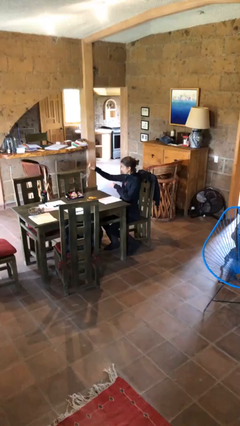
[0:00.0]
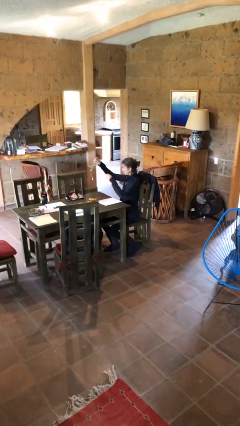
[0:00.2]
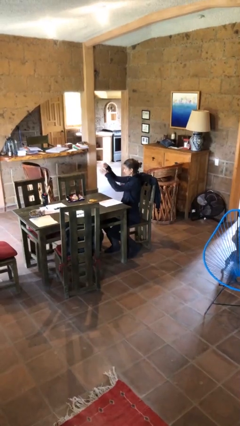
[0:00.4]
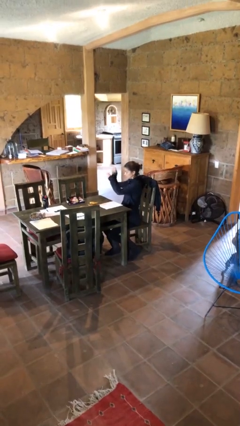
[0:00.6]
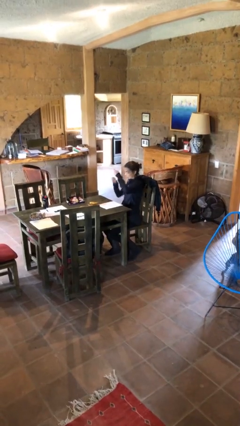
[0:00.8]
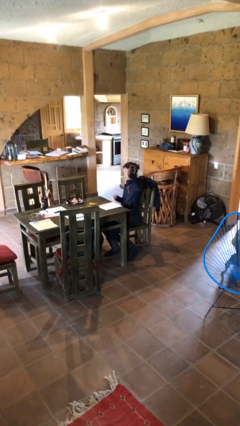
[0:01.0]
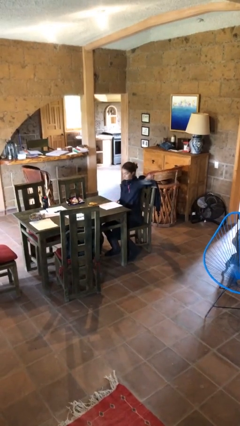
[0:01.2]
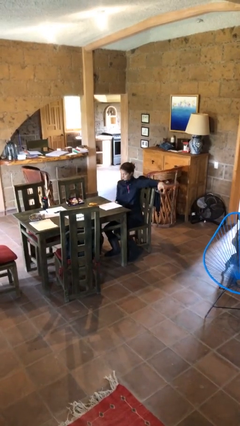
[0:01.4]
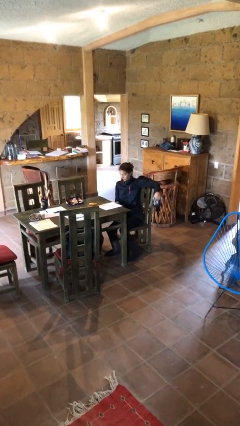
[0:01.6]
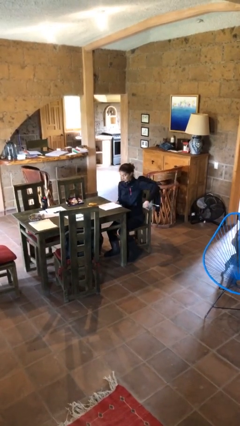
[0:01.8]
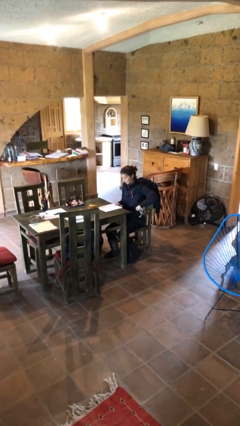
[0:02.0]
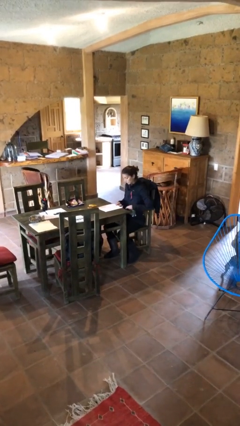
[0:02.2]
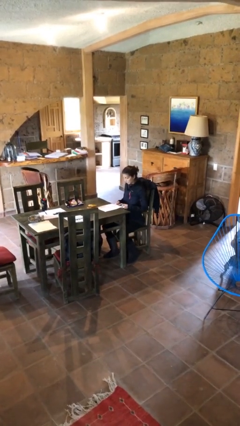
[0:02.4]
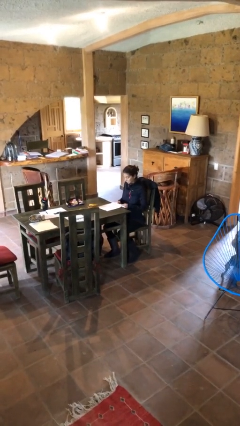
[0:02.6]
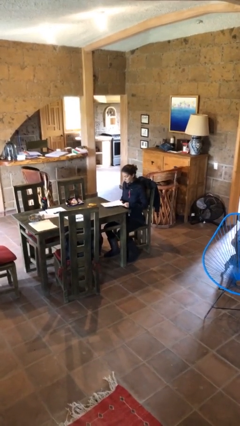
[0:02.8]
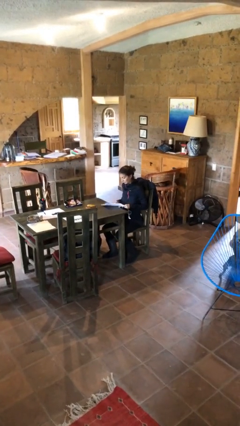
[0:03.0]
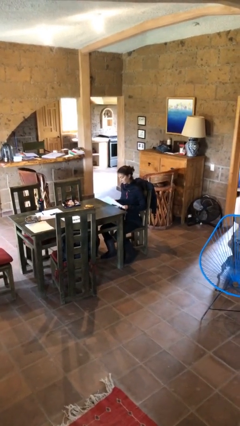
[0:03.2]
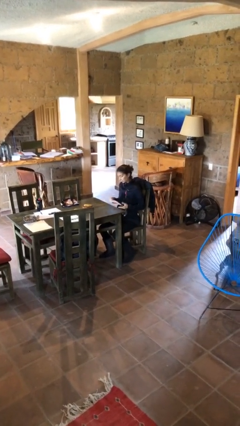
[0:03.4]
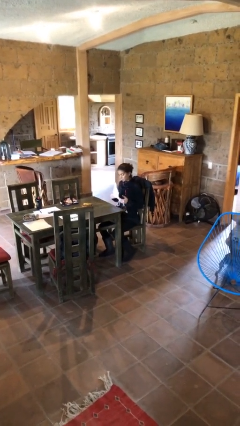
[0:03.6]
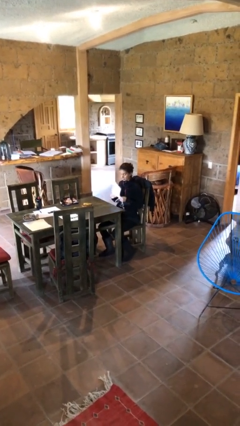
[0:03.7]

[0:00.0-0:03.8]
person picks up object from table

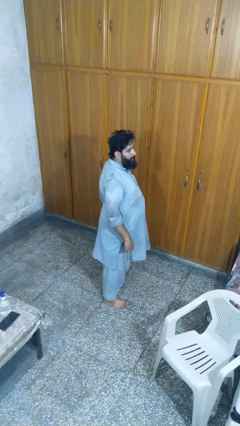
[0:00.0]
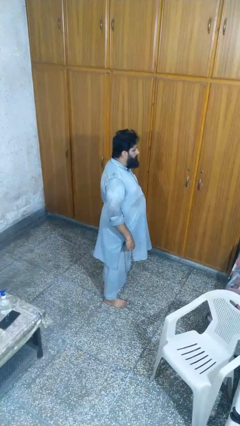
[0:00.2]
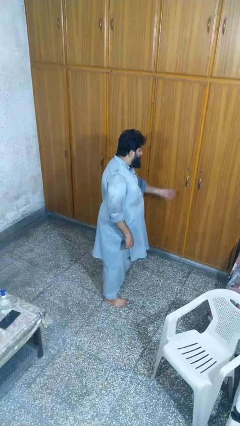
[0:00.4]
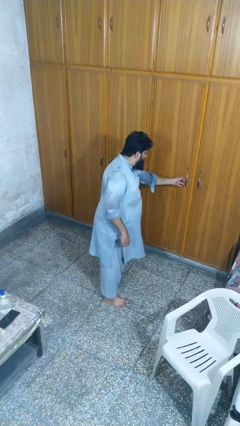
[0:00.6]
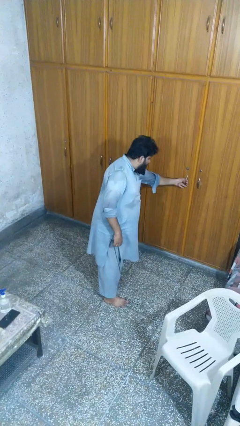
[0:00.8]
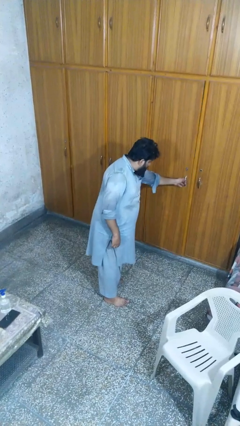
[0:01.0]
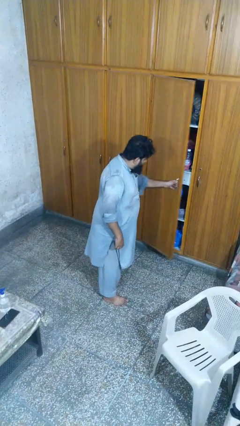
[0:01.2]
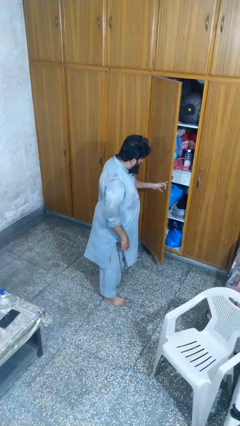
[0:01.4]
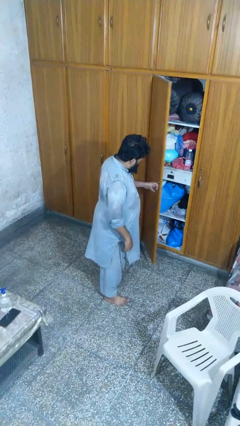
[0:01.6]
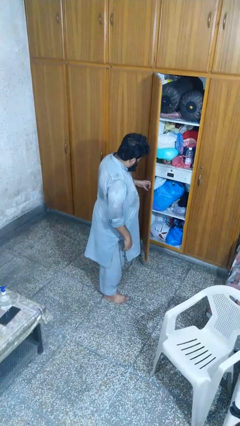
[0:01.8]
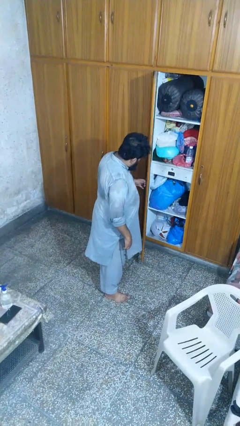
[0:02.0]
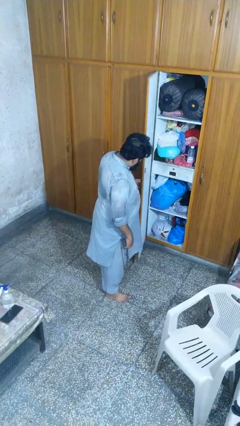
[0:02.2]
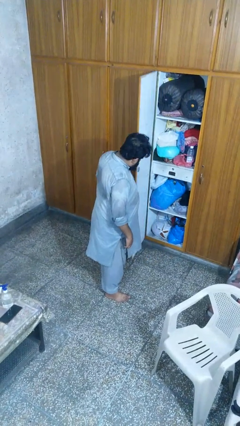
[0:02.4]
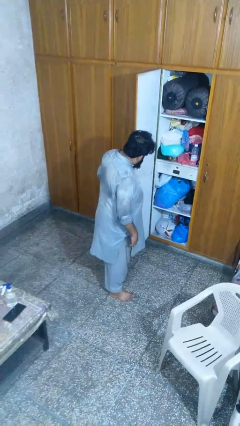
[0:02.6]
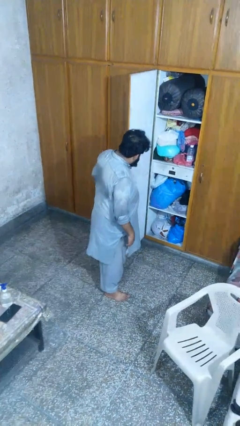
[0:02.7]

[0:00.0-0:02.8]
person opens closet door

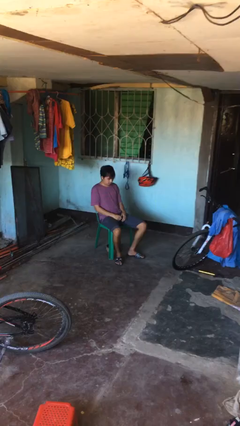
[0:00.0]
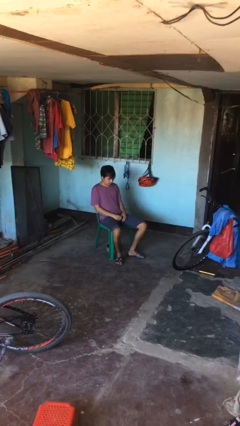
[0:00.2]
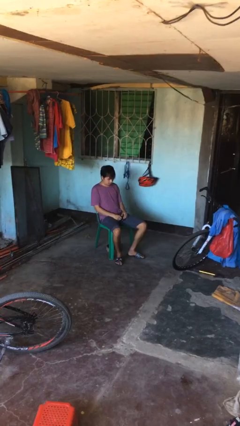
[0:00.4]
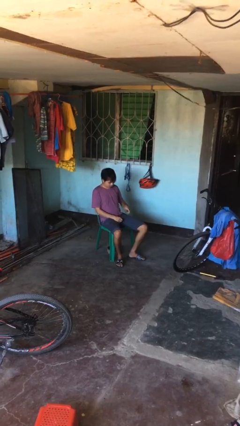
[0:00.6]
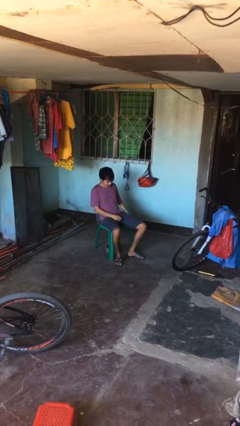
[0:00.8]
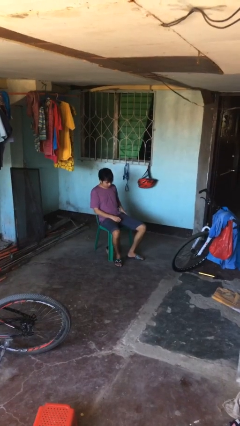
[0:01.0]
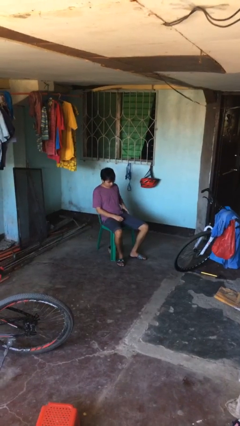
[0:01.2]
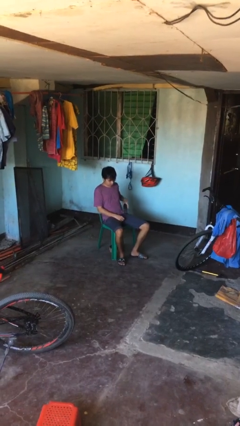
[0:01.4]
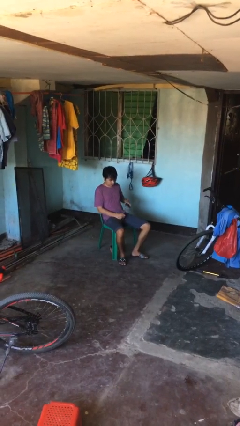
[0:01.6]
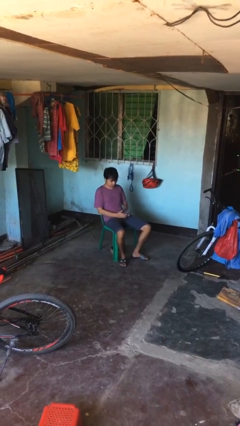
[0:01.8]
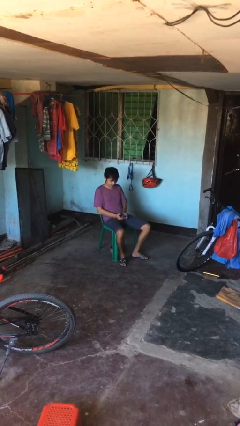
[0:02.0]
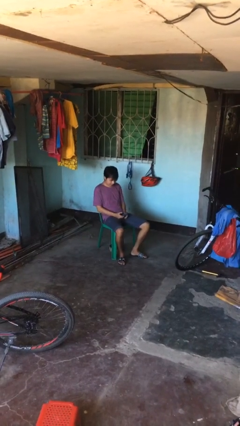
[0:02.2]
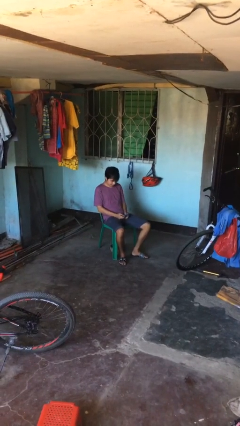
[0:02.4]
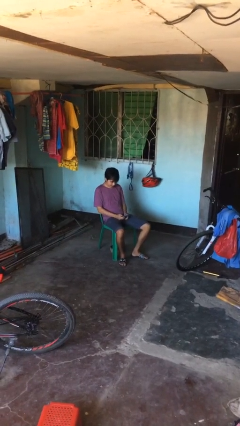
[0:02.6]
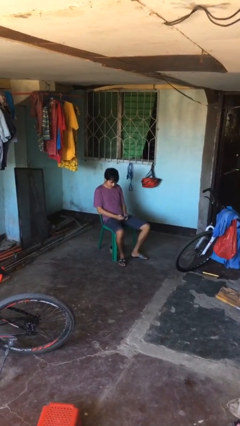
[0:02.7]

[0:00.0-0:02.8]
person takes phone from pocket

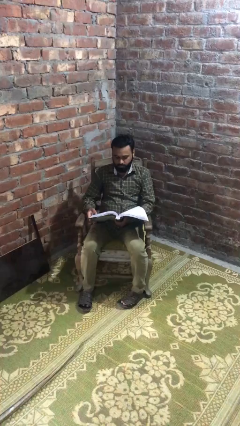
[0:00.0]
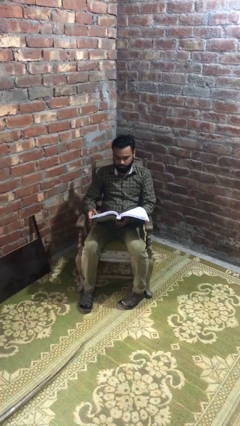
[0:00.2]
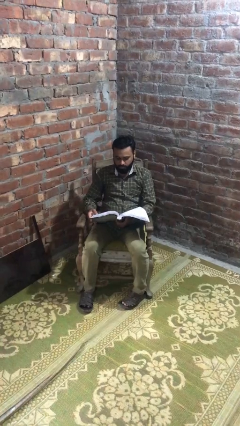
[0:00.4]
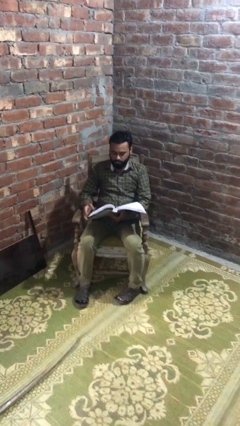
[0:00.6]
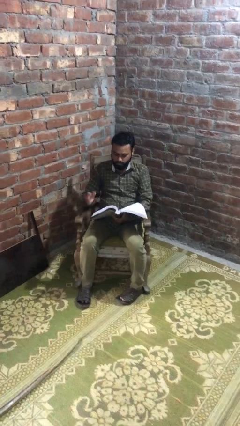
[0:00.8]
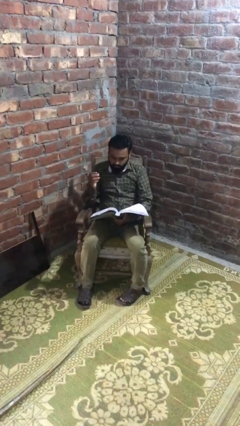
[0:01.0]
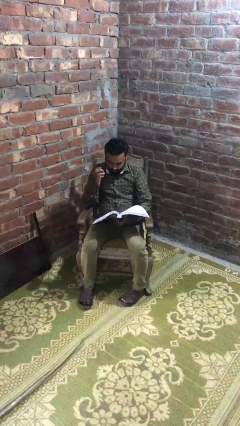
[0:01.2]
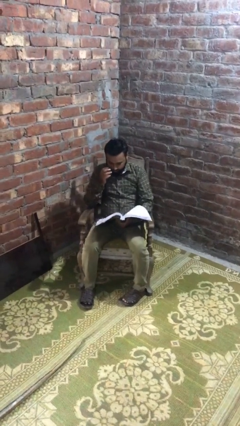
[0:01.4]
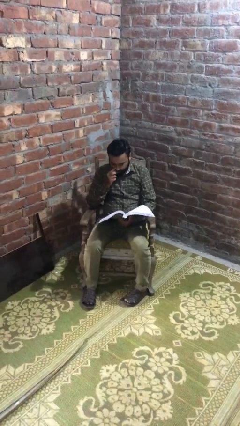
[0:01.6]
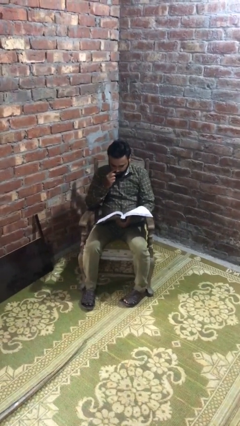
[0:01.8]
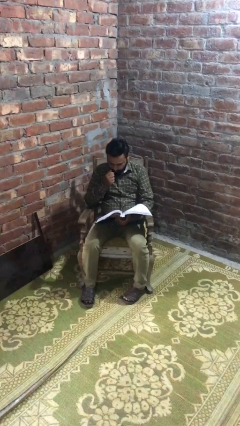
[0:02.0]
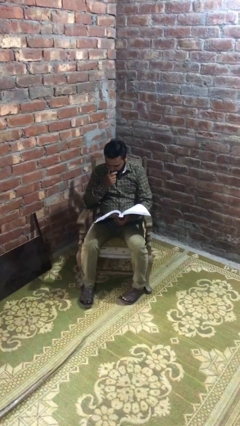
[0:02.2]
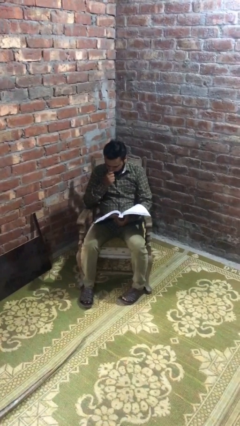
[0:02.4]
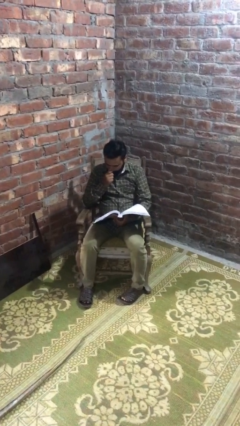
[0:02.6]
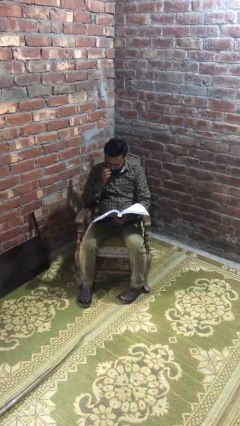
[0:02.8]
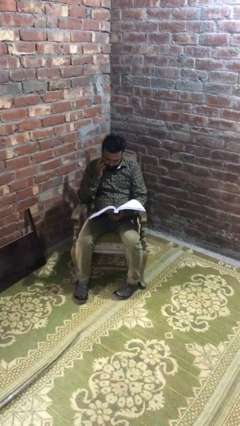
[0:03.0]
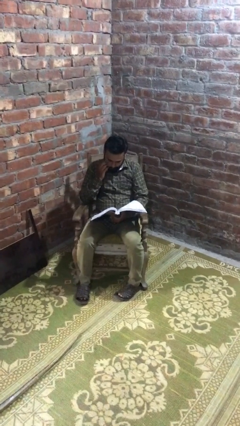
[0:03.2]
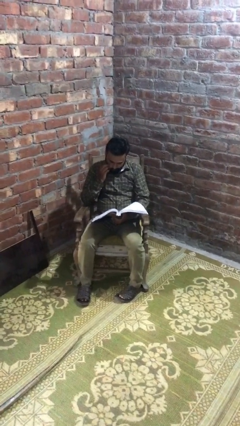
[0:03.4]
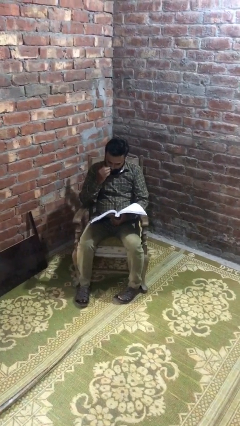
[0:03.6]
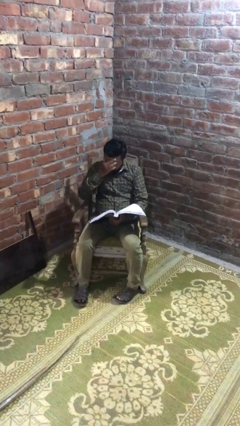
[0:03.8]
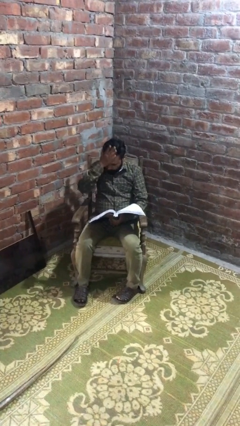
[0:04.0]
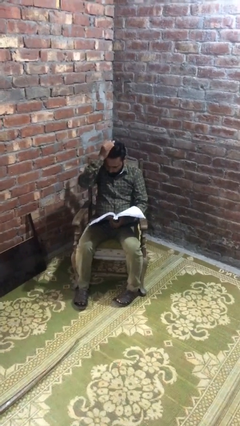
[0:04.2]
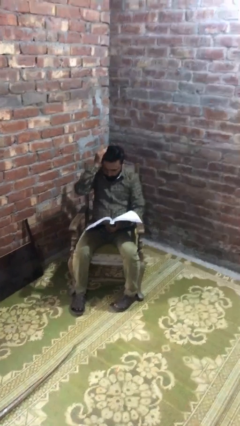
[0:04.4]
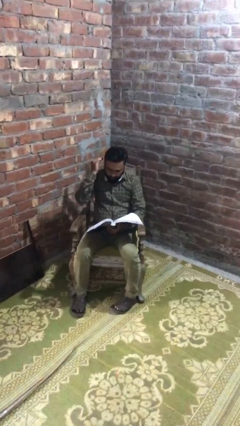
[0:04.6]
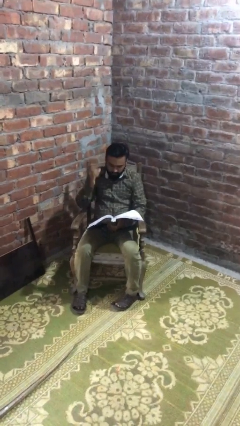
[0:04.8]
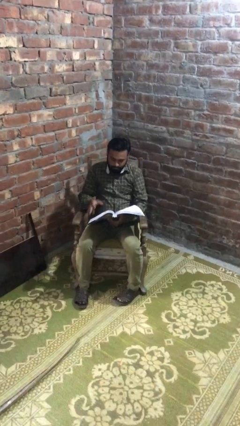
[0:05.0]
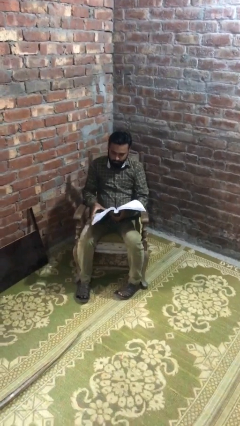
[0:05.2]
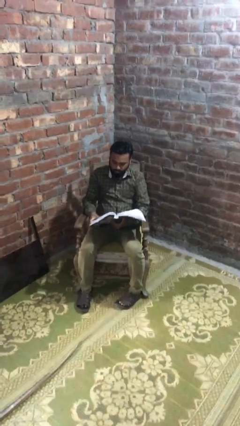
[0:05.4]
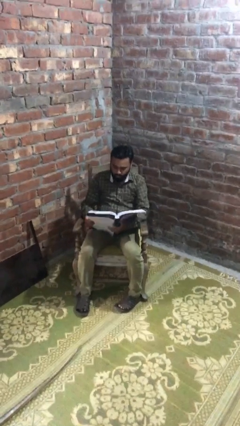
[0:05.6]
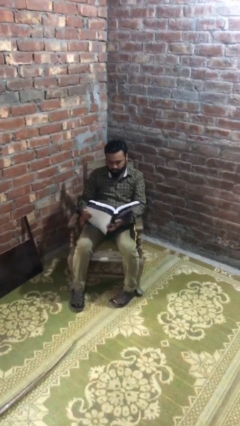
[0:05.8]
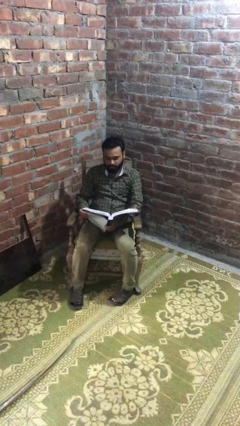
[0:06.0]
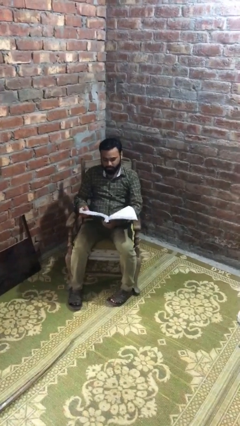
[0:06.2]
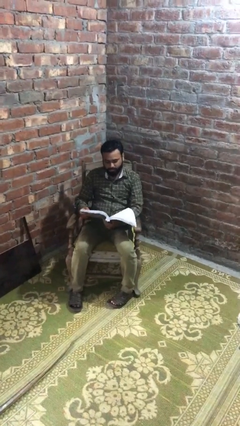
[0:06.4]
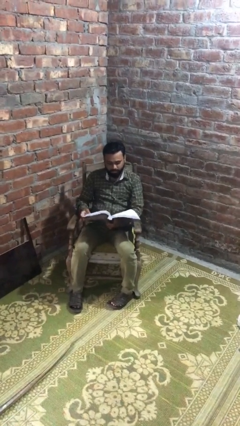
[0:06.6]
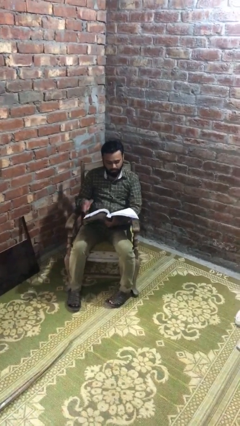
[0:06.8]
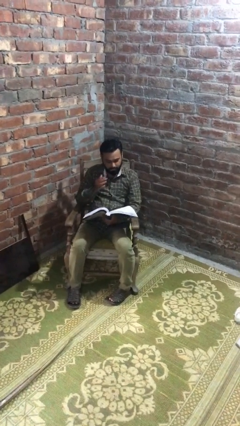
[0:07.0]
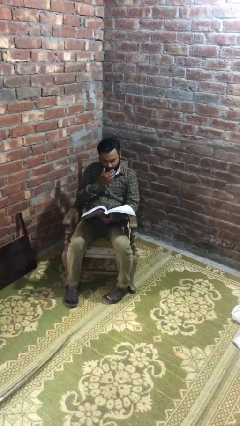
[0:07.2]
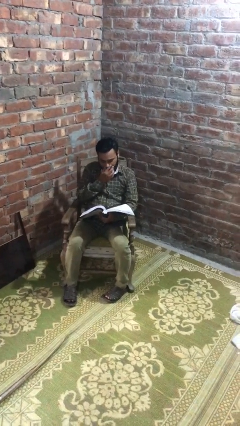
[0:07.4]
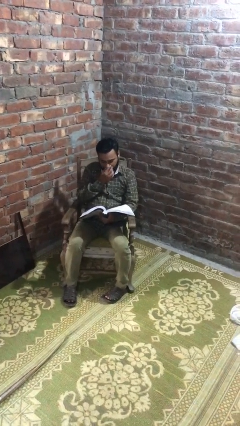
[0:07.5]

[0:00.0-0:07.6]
person reads document

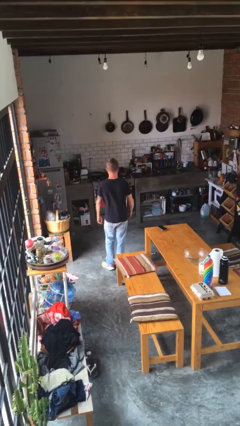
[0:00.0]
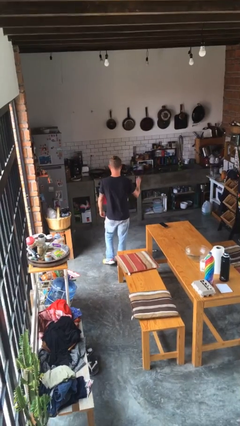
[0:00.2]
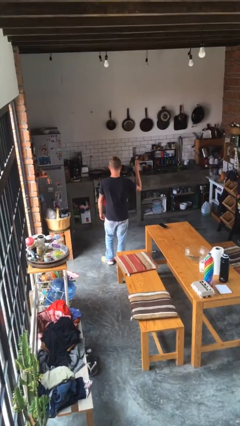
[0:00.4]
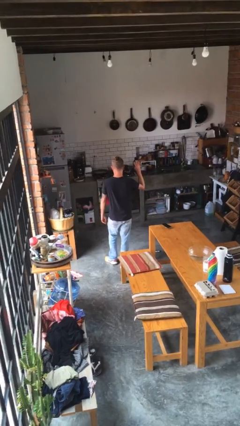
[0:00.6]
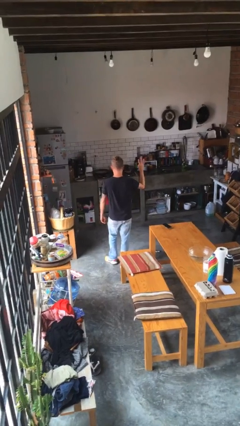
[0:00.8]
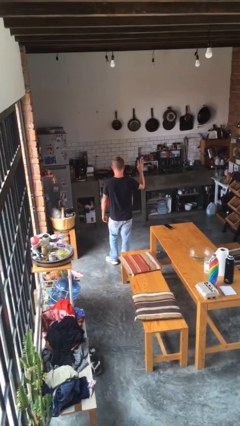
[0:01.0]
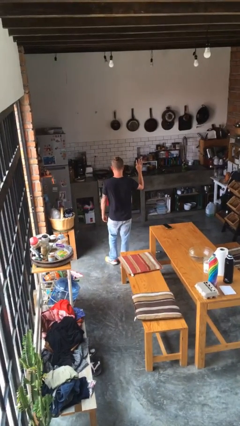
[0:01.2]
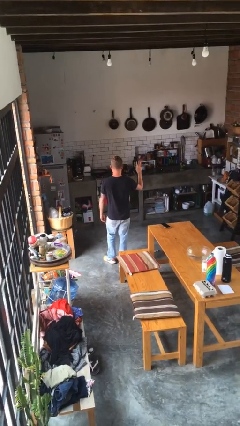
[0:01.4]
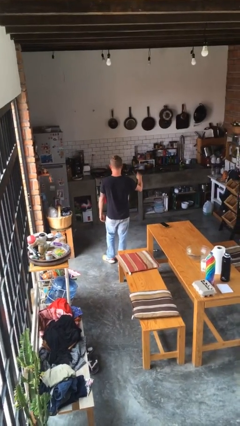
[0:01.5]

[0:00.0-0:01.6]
person gestures number four
